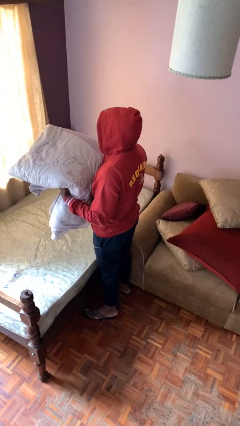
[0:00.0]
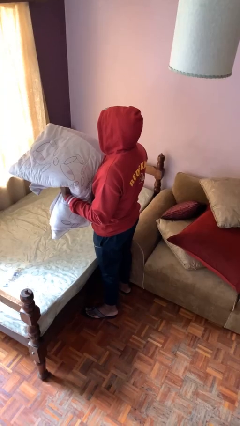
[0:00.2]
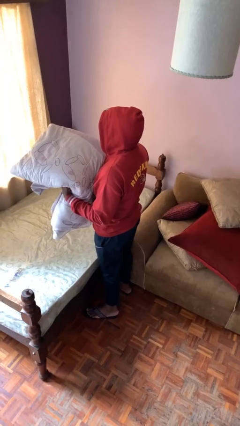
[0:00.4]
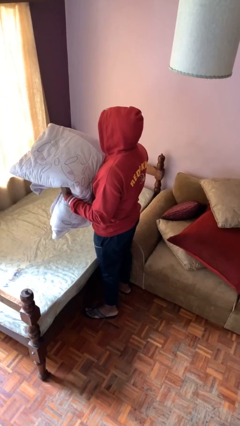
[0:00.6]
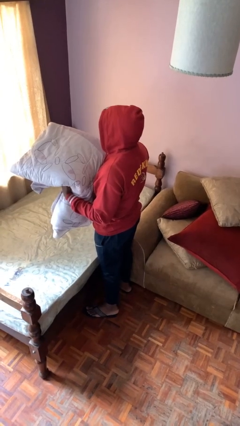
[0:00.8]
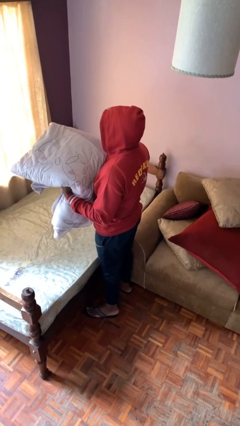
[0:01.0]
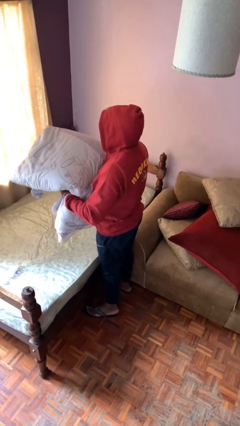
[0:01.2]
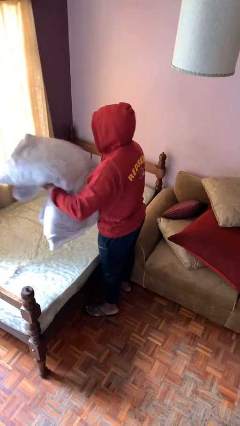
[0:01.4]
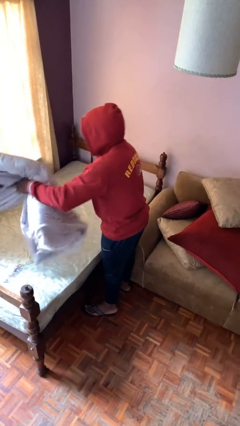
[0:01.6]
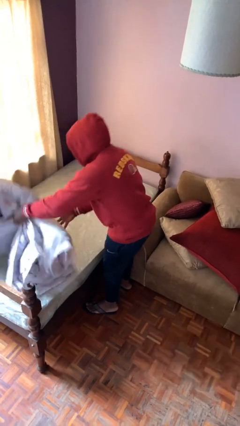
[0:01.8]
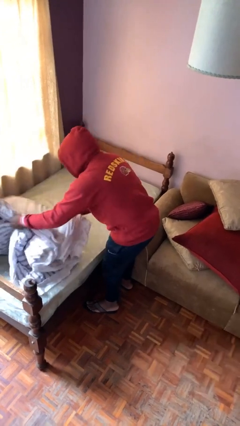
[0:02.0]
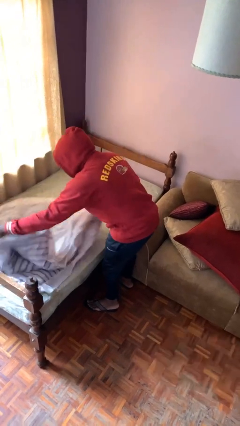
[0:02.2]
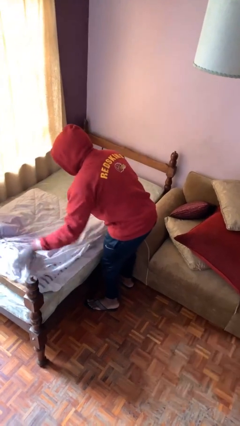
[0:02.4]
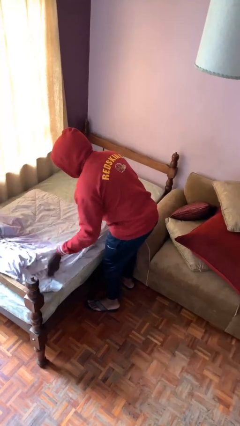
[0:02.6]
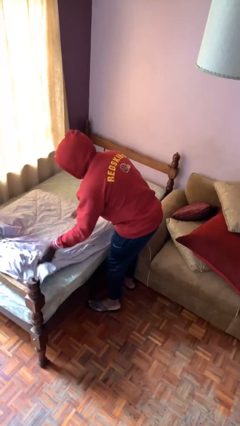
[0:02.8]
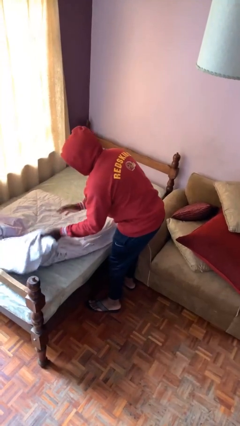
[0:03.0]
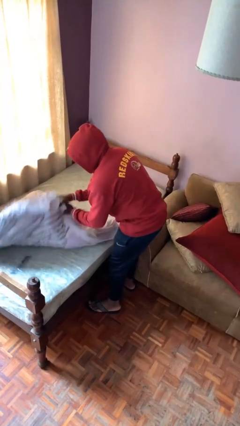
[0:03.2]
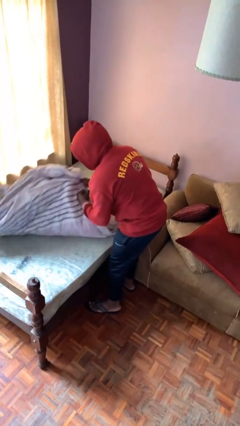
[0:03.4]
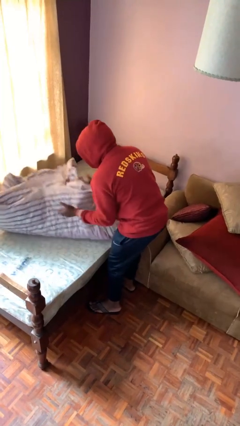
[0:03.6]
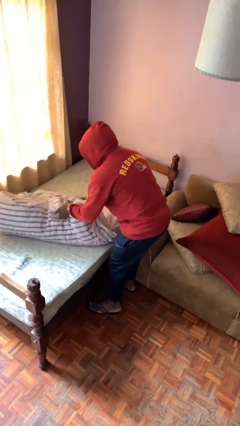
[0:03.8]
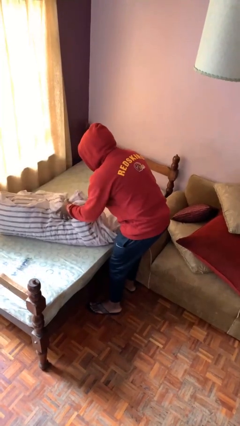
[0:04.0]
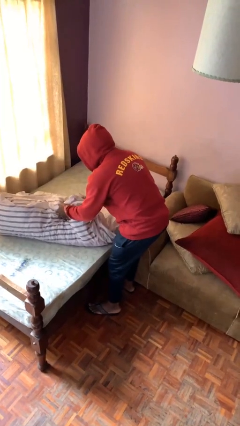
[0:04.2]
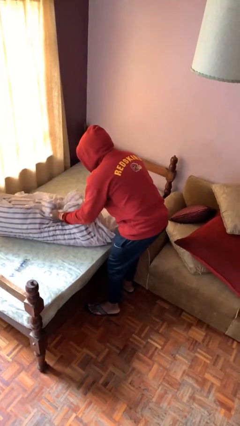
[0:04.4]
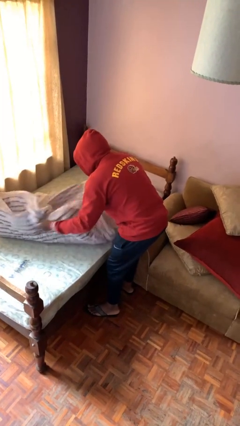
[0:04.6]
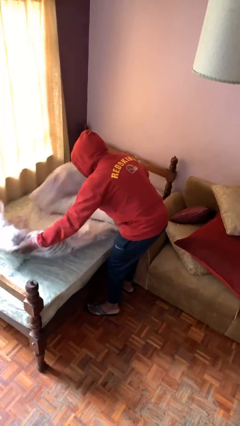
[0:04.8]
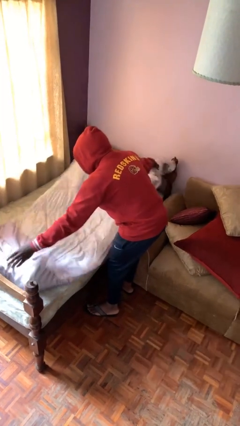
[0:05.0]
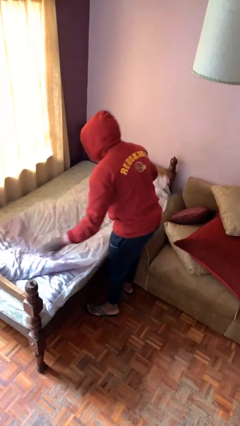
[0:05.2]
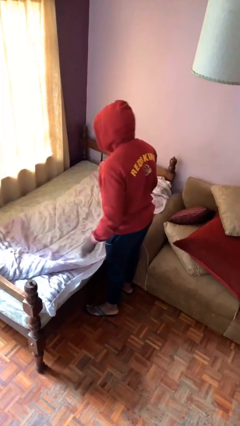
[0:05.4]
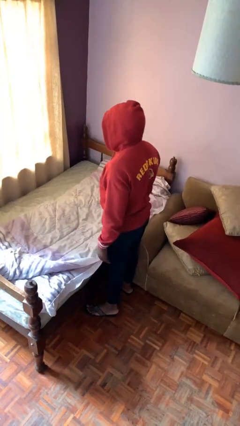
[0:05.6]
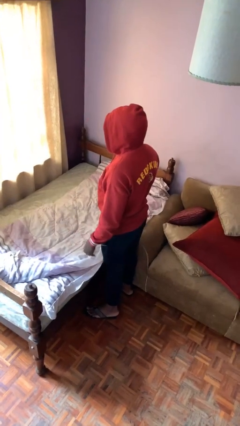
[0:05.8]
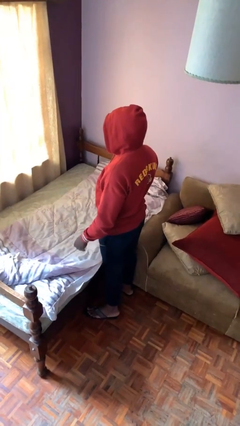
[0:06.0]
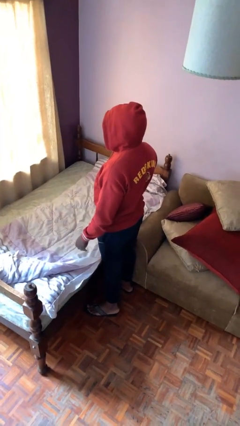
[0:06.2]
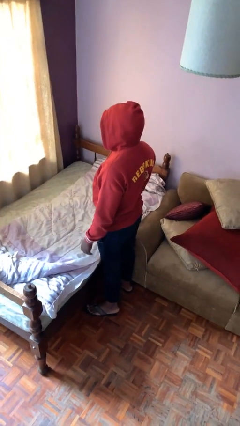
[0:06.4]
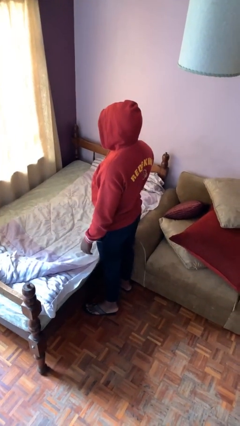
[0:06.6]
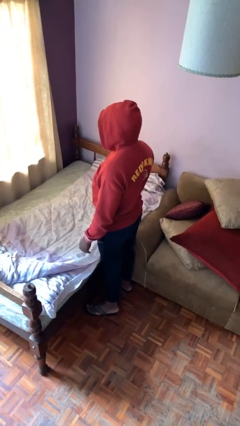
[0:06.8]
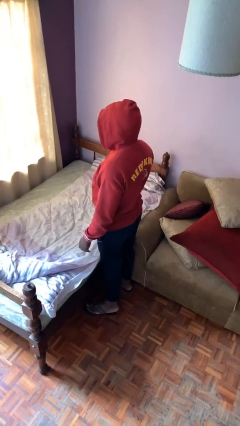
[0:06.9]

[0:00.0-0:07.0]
person unfolds blanket

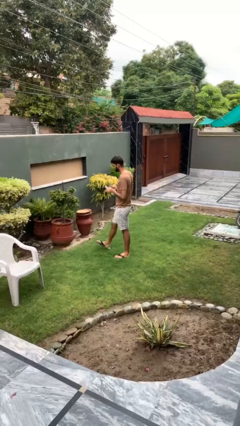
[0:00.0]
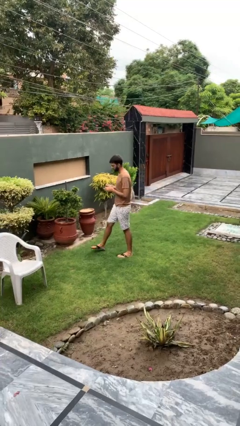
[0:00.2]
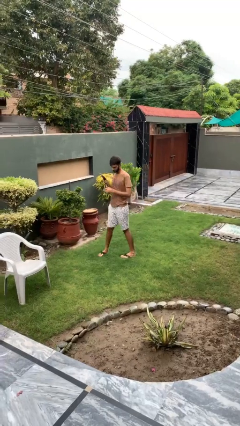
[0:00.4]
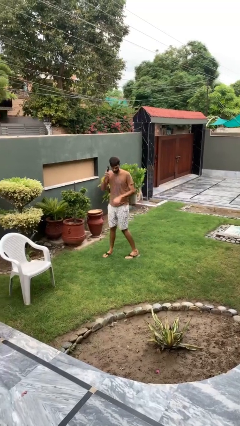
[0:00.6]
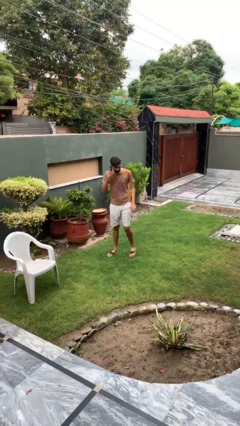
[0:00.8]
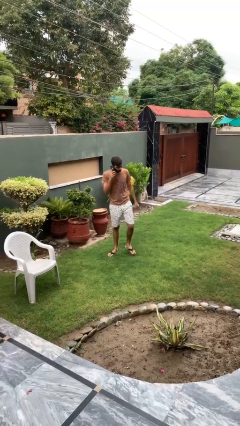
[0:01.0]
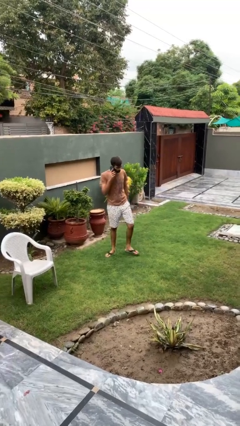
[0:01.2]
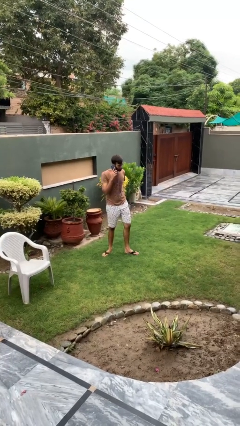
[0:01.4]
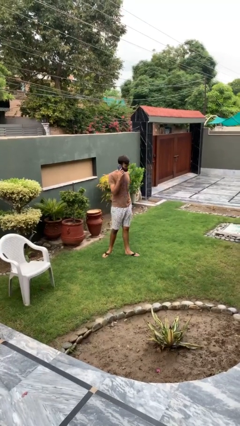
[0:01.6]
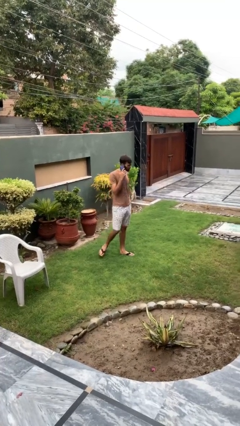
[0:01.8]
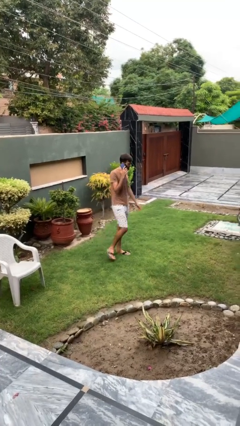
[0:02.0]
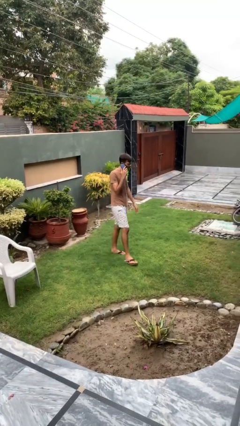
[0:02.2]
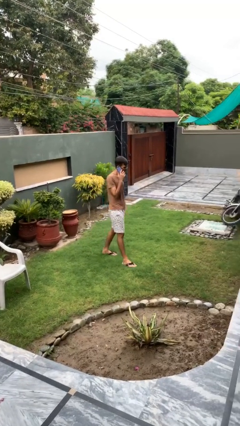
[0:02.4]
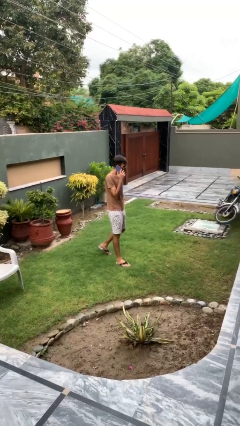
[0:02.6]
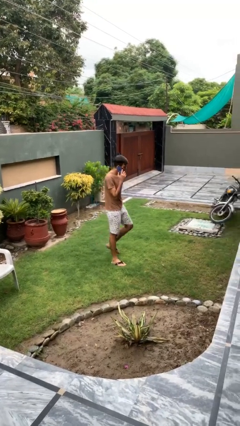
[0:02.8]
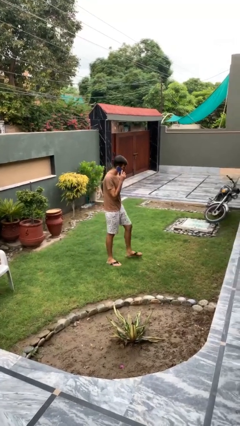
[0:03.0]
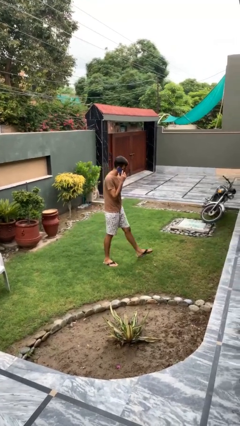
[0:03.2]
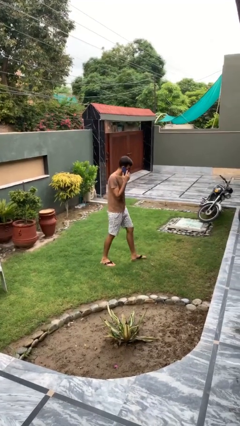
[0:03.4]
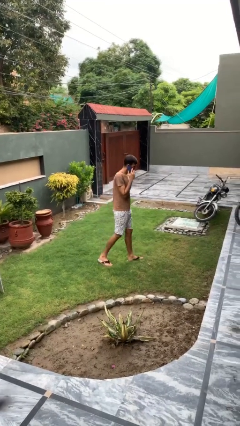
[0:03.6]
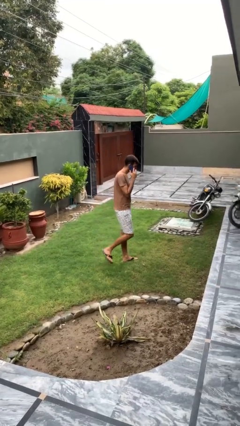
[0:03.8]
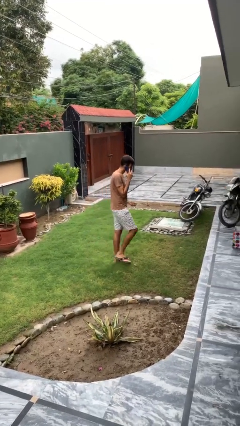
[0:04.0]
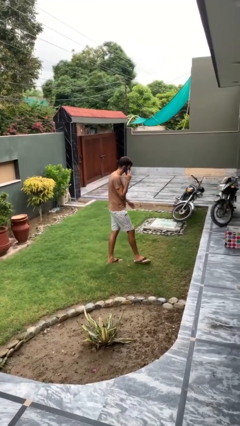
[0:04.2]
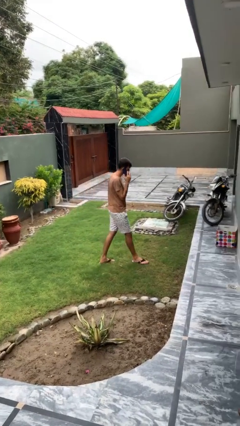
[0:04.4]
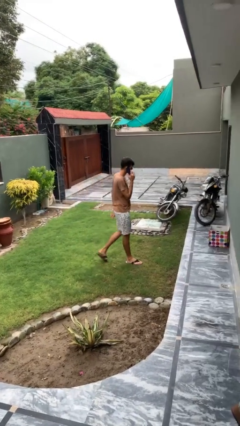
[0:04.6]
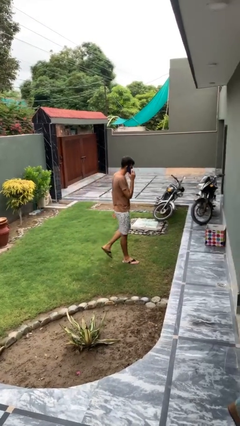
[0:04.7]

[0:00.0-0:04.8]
person talks on phone

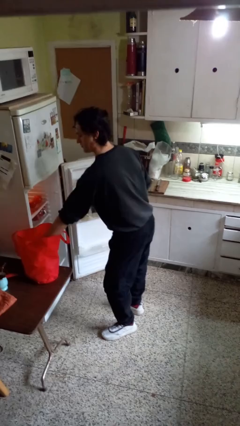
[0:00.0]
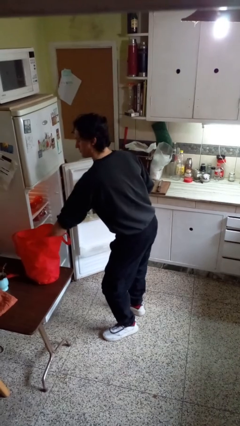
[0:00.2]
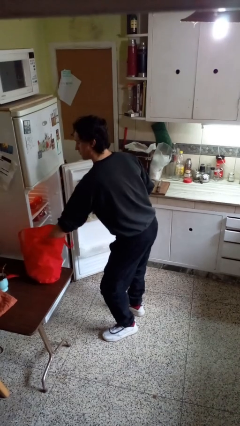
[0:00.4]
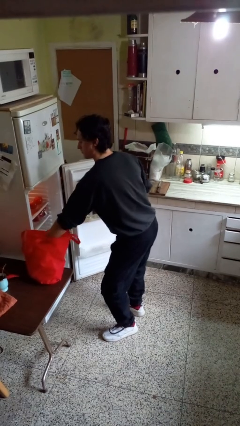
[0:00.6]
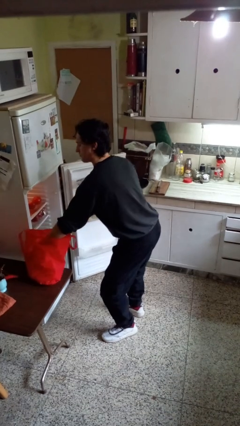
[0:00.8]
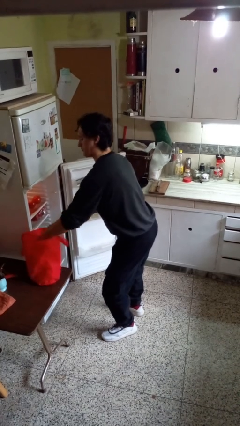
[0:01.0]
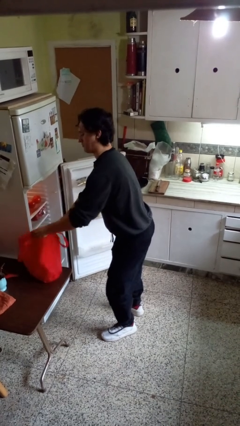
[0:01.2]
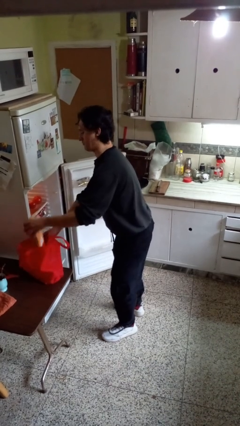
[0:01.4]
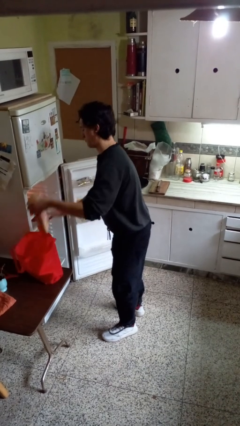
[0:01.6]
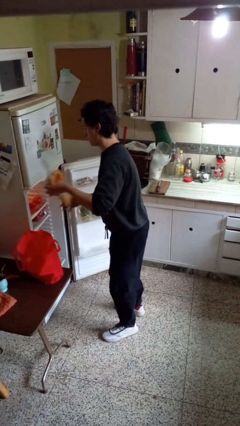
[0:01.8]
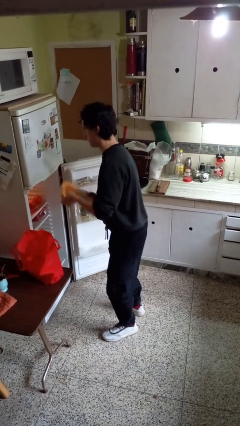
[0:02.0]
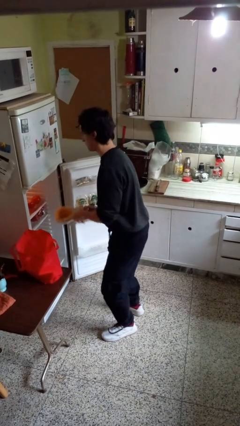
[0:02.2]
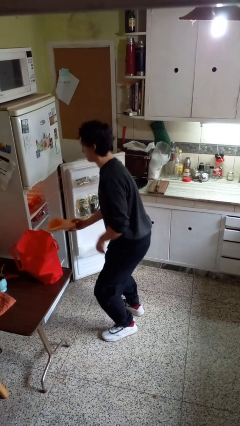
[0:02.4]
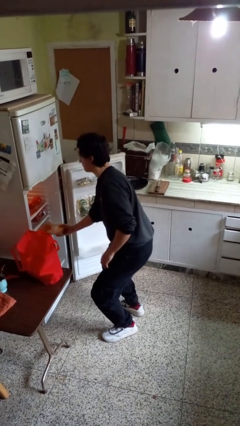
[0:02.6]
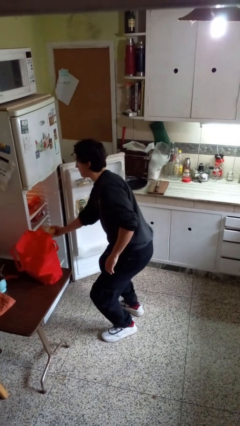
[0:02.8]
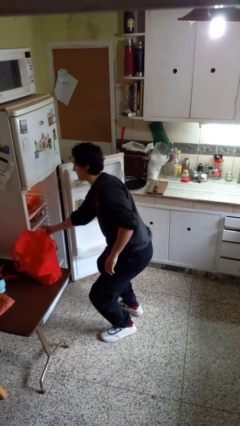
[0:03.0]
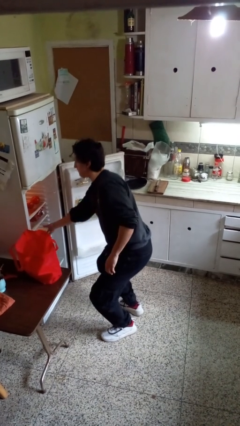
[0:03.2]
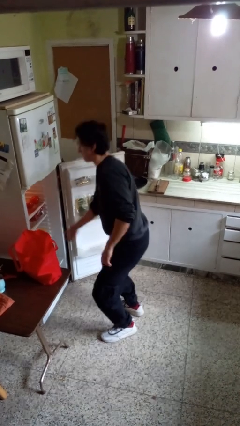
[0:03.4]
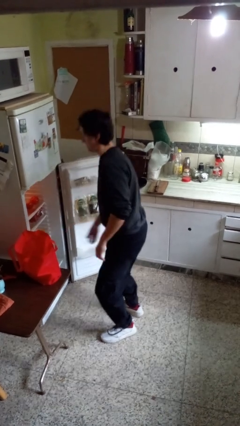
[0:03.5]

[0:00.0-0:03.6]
person loads groceries into refrigerator

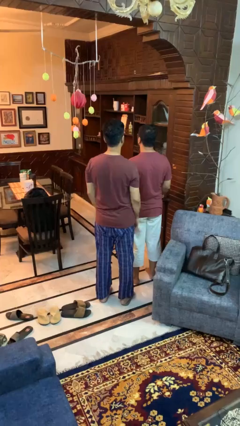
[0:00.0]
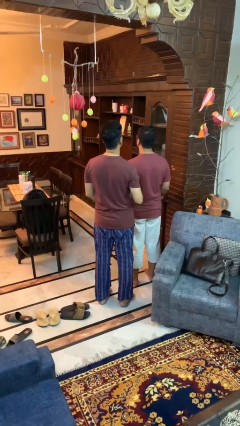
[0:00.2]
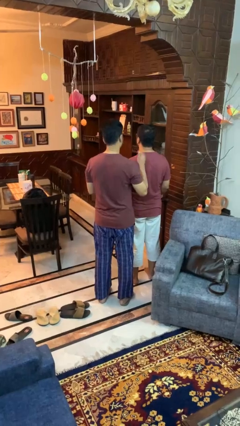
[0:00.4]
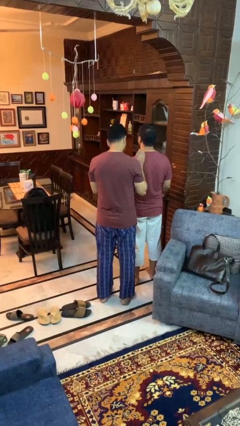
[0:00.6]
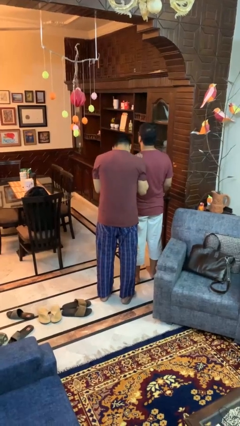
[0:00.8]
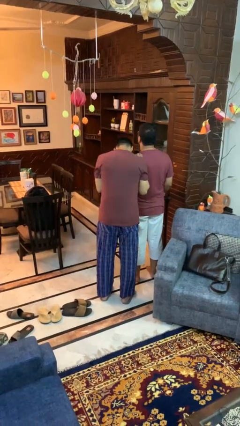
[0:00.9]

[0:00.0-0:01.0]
person shoves person

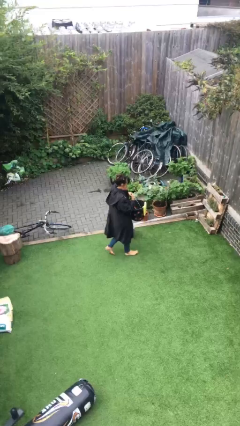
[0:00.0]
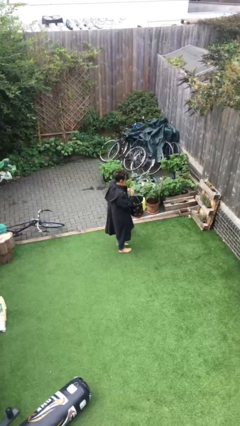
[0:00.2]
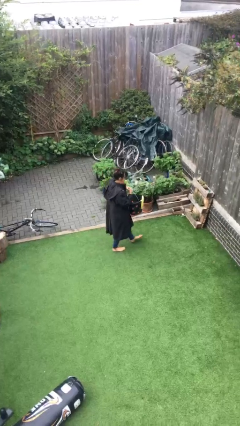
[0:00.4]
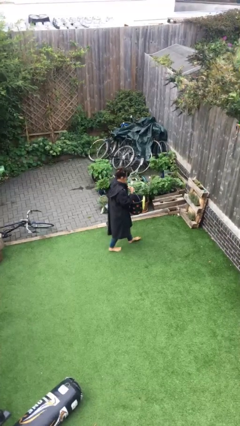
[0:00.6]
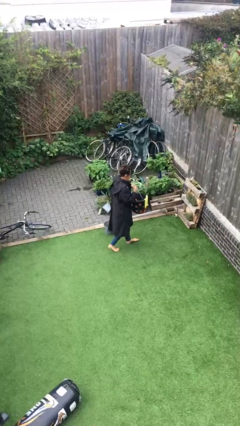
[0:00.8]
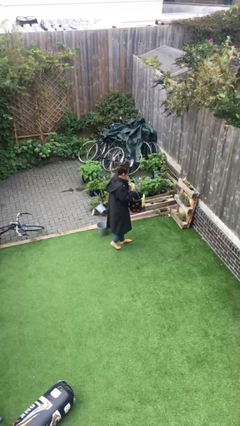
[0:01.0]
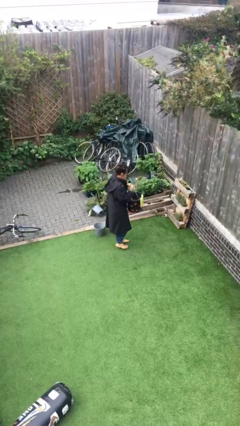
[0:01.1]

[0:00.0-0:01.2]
person puts down object on floor
